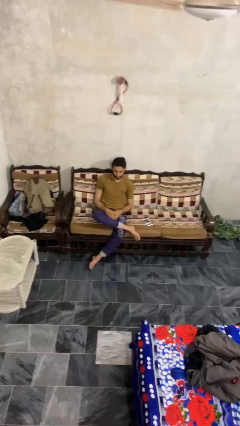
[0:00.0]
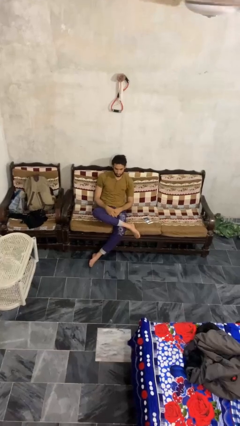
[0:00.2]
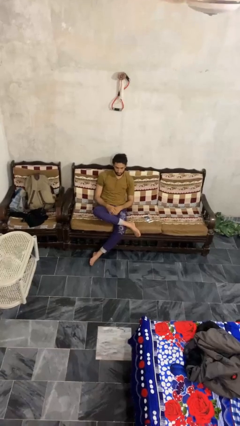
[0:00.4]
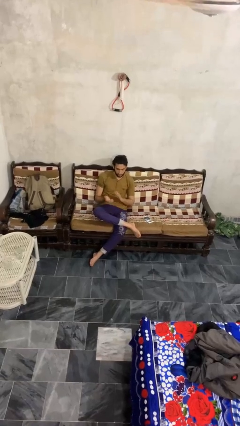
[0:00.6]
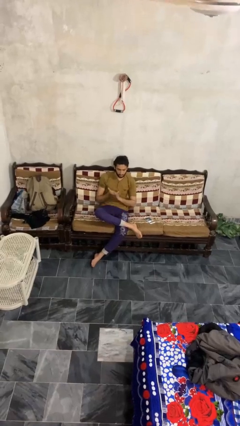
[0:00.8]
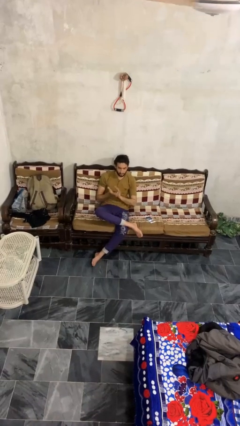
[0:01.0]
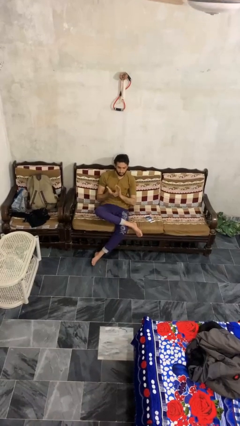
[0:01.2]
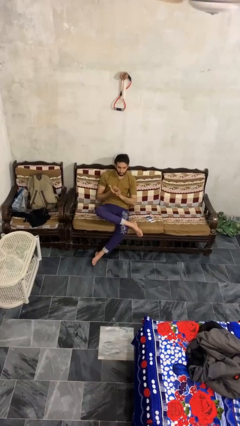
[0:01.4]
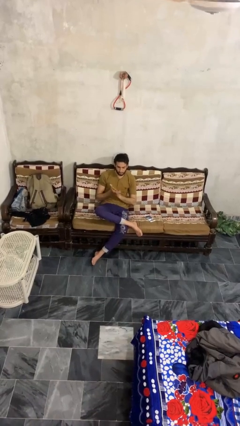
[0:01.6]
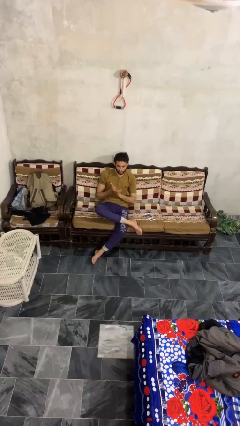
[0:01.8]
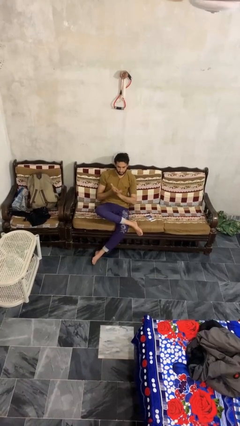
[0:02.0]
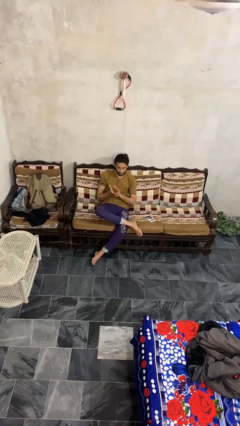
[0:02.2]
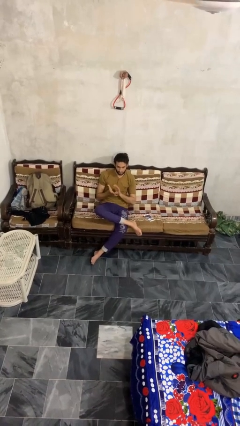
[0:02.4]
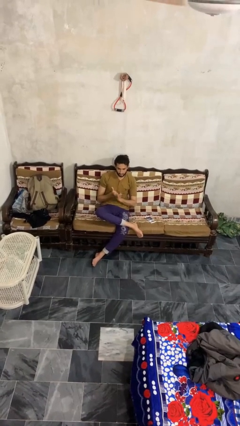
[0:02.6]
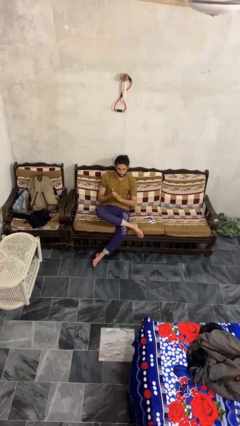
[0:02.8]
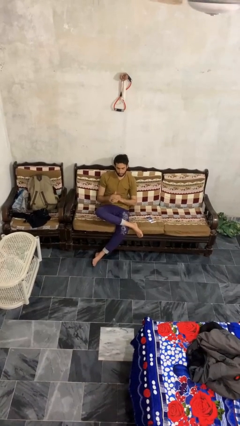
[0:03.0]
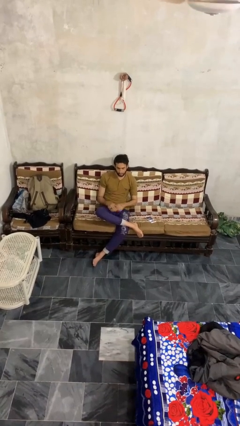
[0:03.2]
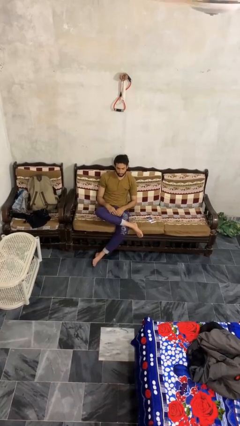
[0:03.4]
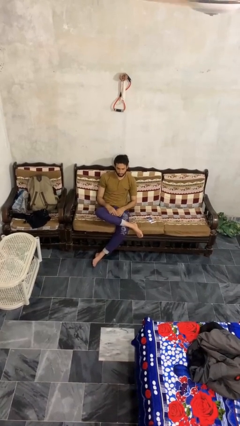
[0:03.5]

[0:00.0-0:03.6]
person claps hands

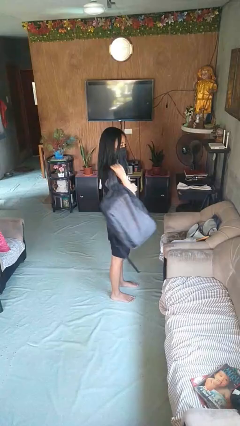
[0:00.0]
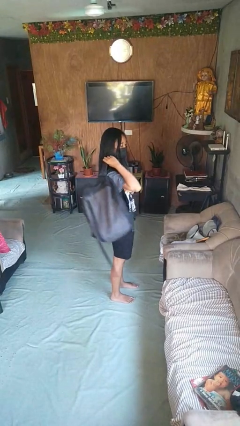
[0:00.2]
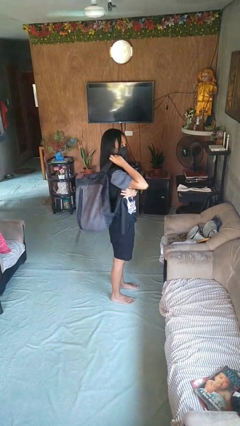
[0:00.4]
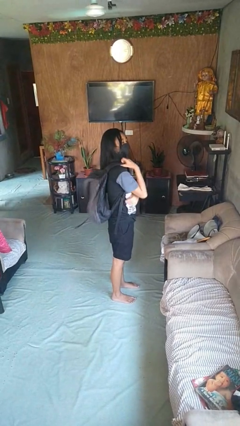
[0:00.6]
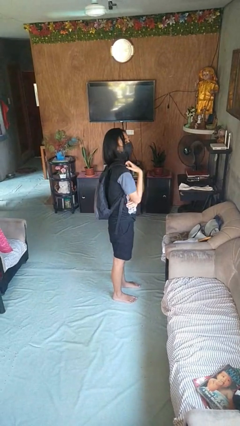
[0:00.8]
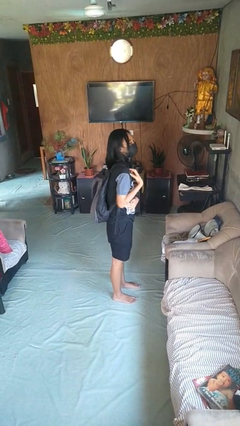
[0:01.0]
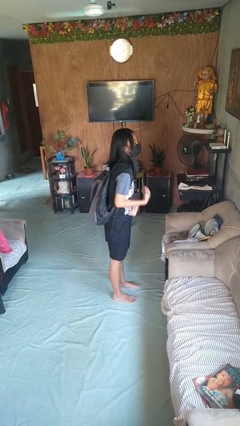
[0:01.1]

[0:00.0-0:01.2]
person puts on backpack

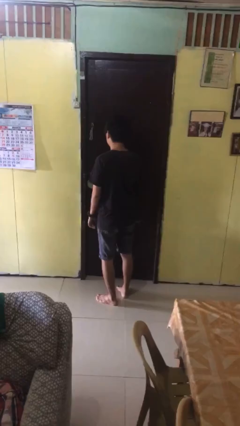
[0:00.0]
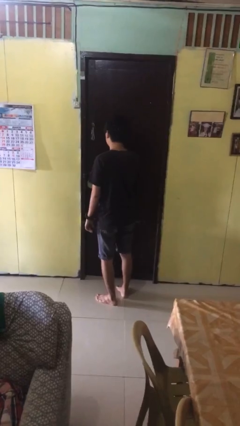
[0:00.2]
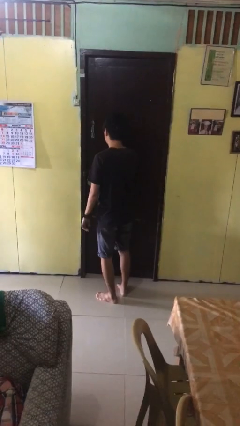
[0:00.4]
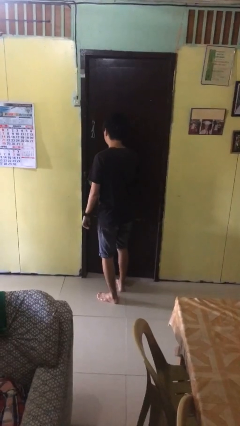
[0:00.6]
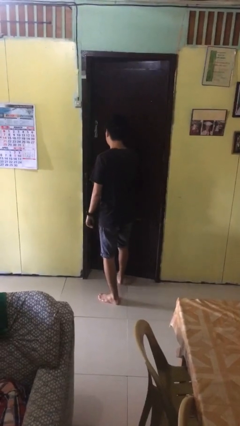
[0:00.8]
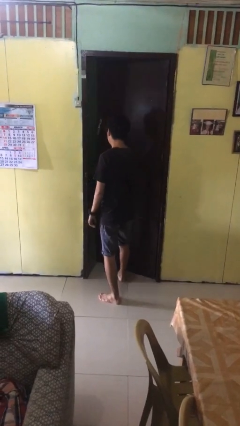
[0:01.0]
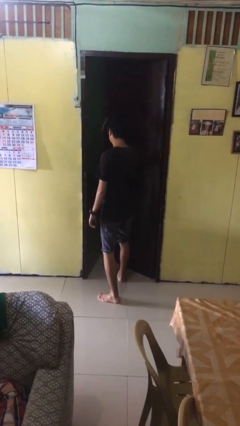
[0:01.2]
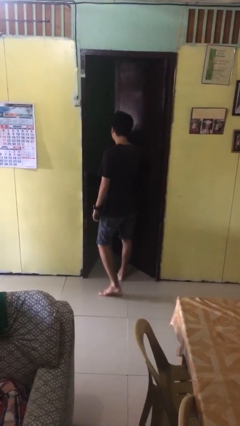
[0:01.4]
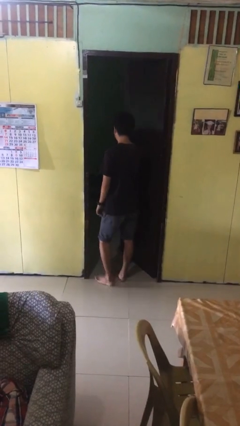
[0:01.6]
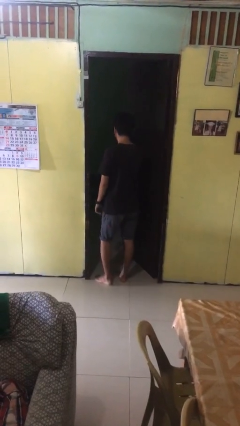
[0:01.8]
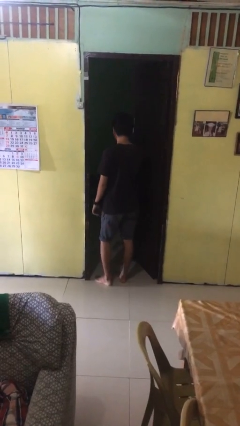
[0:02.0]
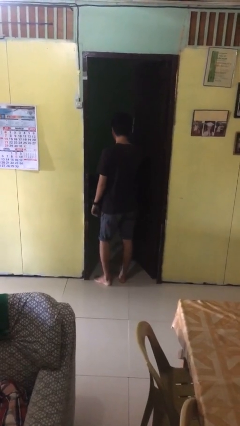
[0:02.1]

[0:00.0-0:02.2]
person opens facility door

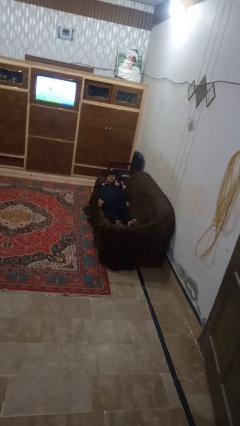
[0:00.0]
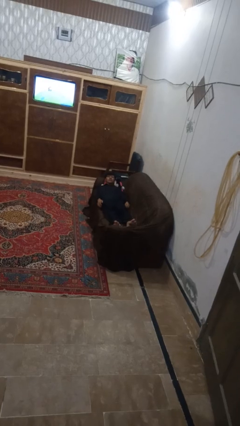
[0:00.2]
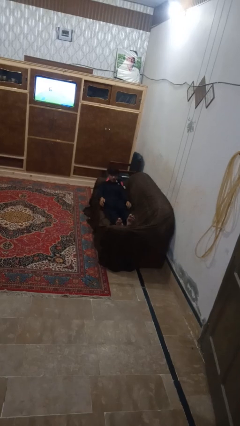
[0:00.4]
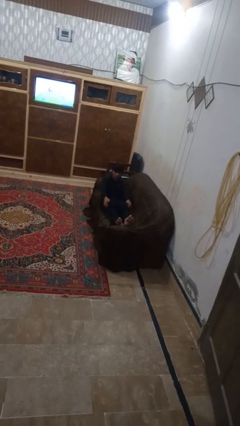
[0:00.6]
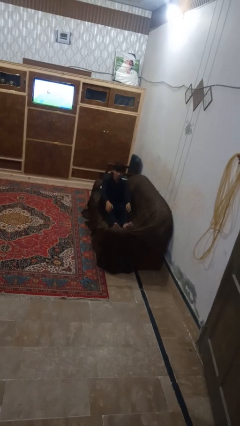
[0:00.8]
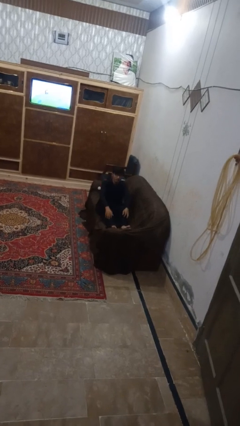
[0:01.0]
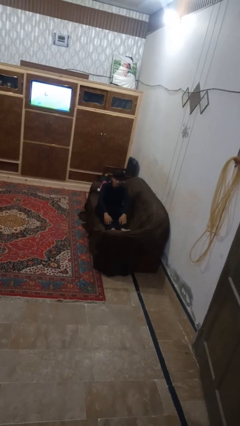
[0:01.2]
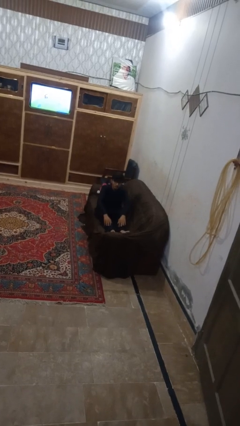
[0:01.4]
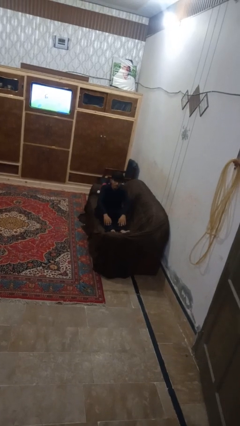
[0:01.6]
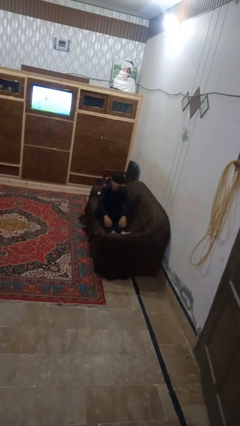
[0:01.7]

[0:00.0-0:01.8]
person stands up

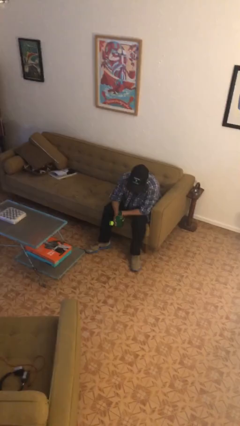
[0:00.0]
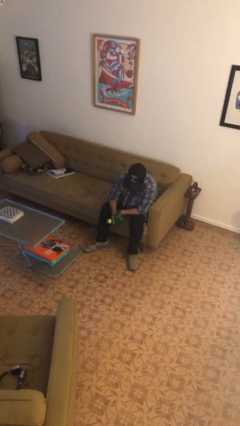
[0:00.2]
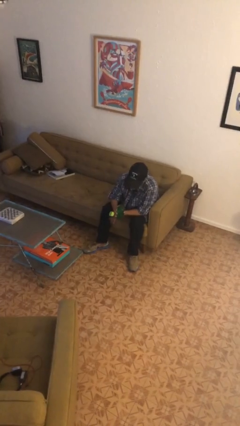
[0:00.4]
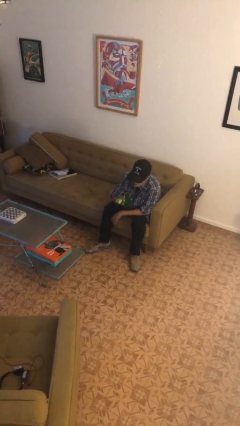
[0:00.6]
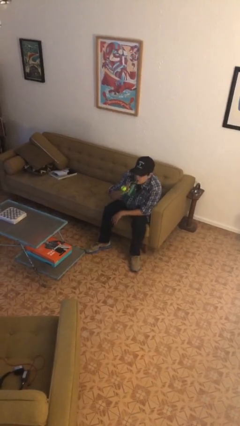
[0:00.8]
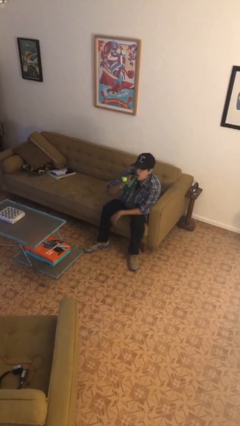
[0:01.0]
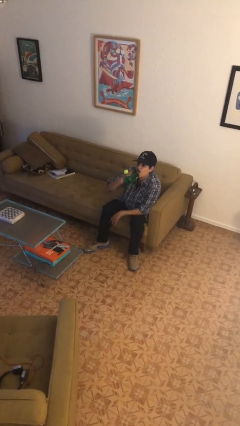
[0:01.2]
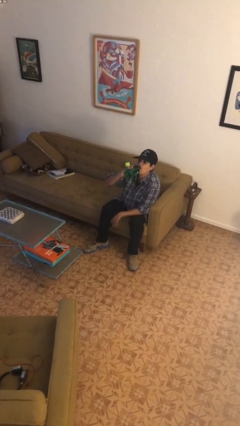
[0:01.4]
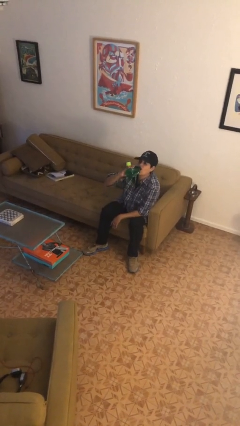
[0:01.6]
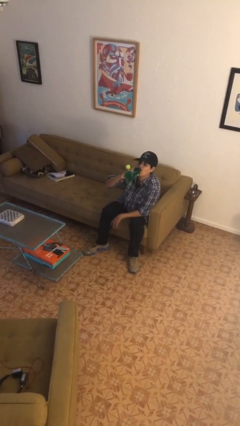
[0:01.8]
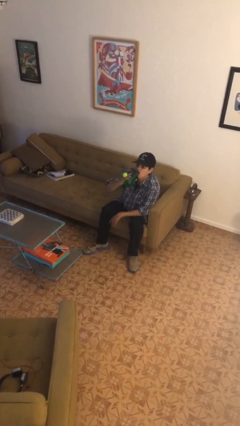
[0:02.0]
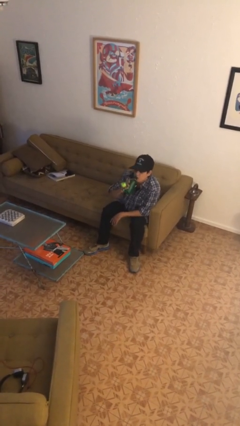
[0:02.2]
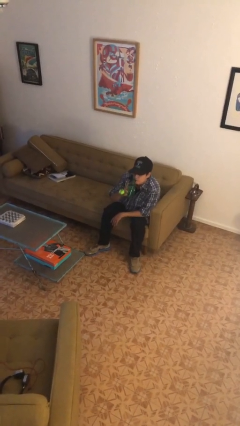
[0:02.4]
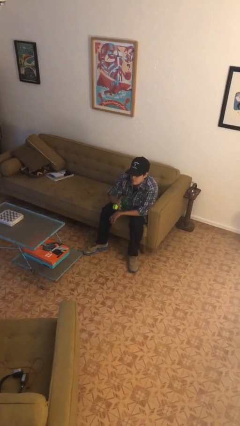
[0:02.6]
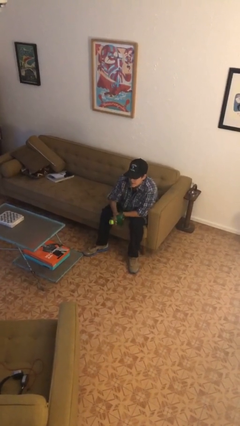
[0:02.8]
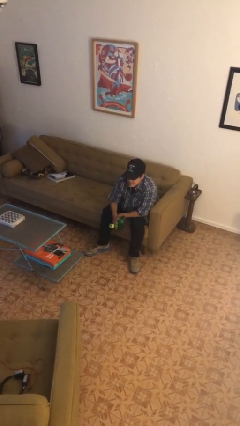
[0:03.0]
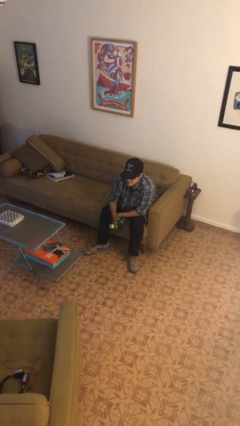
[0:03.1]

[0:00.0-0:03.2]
person drinks from bottle

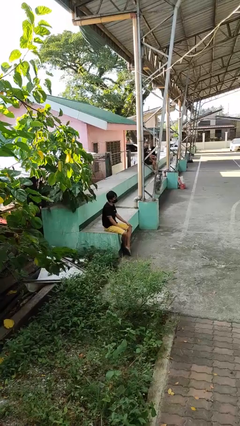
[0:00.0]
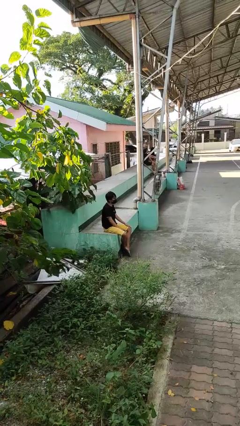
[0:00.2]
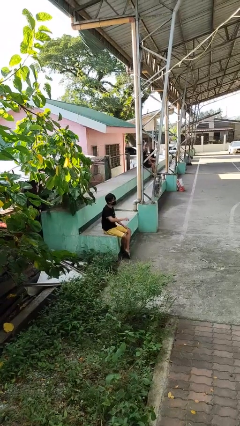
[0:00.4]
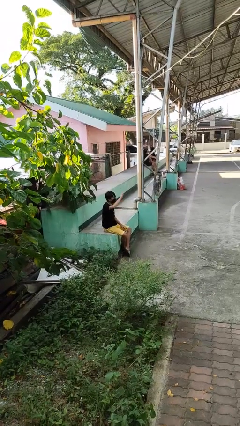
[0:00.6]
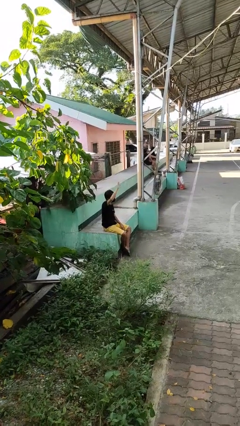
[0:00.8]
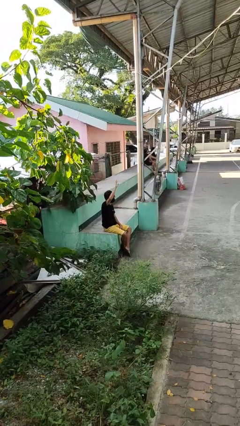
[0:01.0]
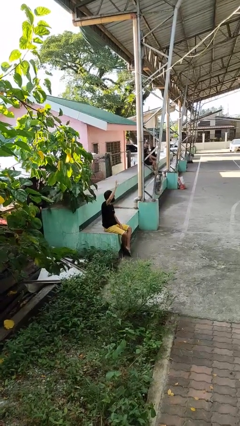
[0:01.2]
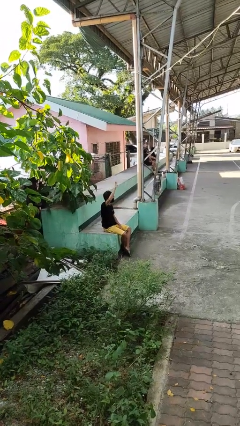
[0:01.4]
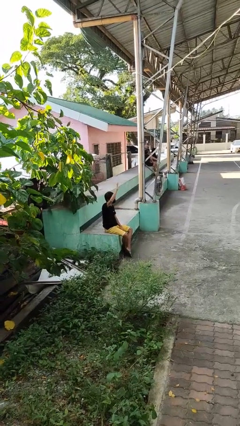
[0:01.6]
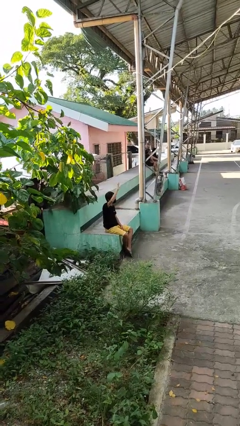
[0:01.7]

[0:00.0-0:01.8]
person gestures raise hand

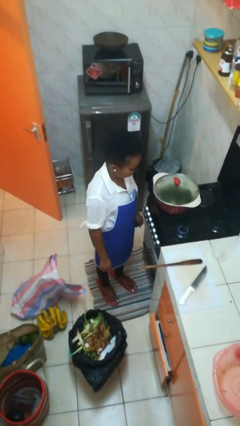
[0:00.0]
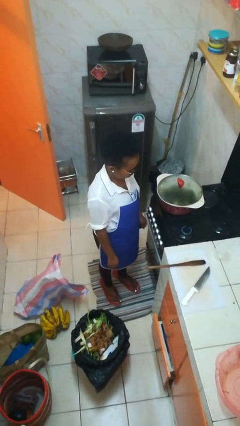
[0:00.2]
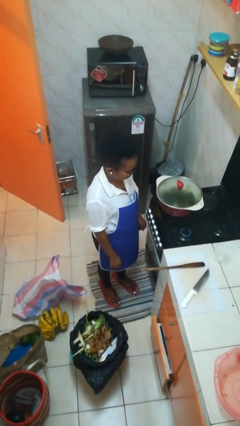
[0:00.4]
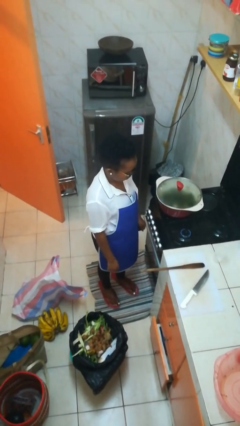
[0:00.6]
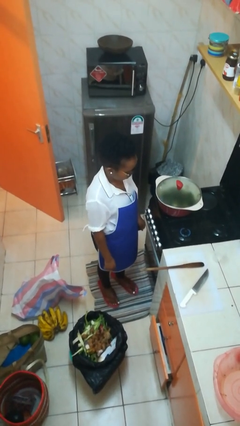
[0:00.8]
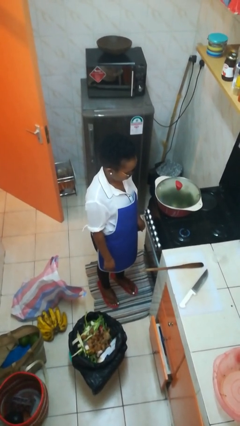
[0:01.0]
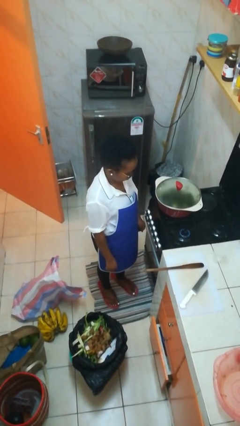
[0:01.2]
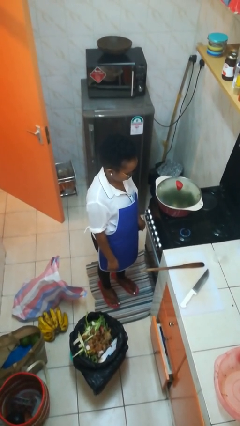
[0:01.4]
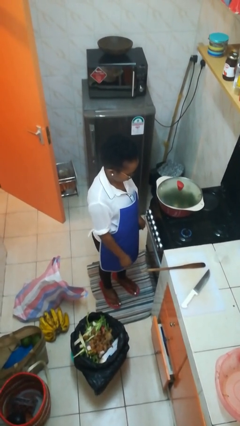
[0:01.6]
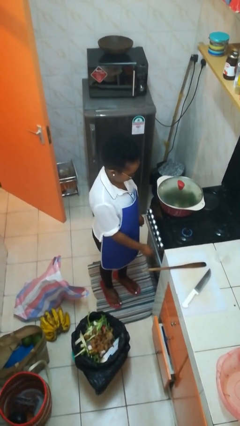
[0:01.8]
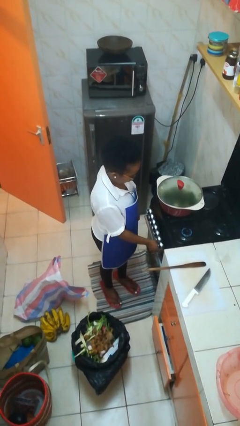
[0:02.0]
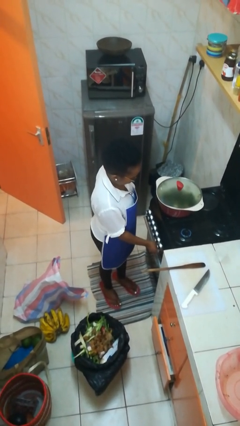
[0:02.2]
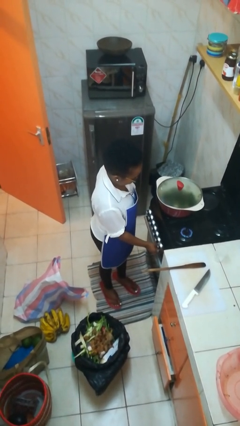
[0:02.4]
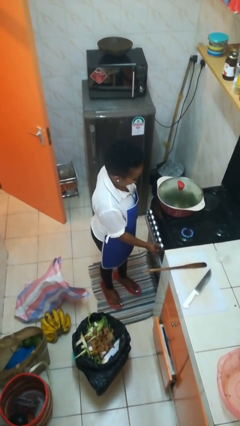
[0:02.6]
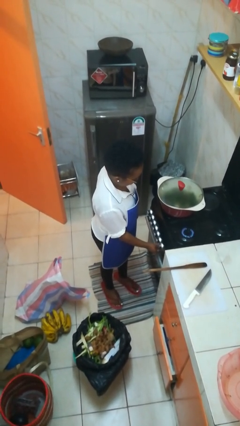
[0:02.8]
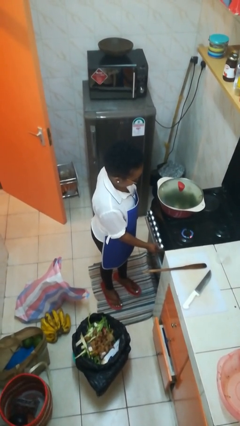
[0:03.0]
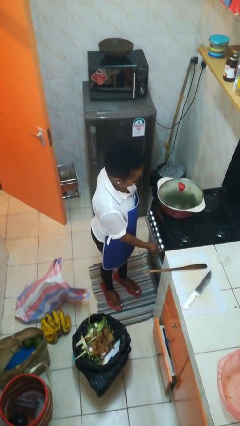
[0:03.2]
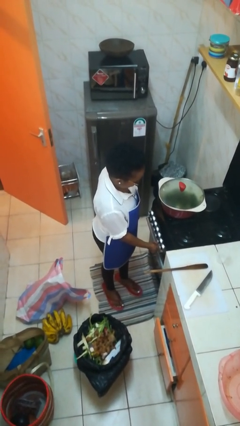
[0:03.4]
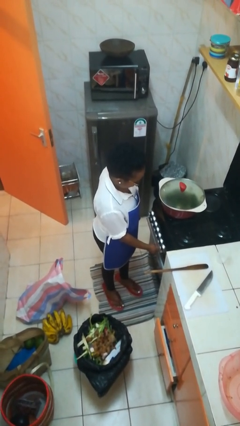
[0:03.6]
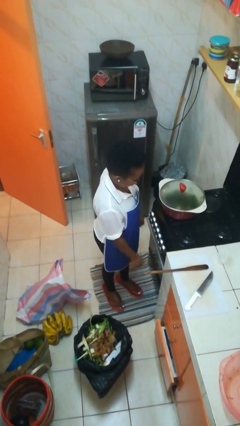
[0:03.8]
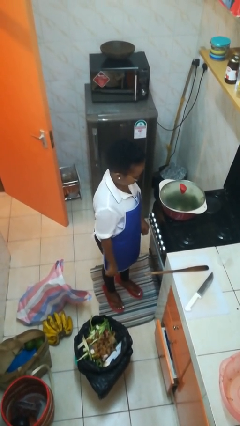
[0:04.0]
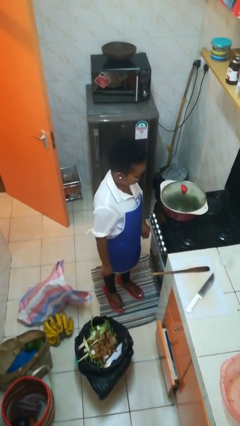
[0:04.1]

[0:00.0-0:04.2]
person turns off stovetop
